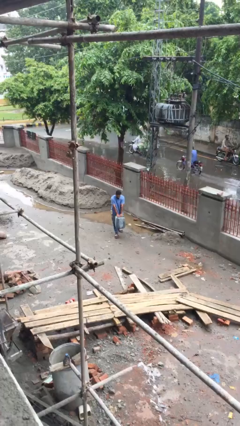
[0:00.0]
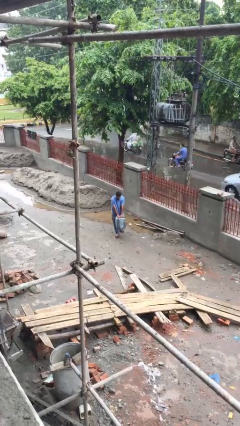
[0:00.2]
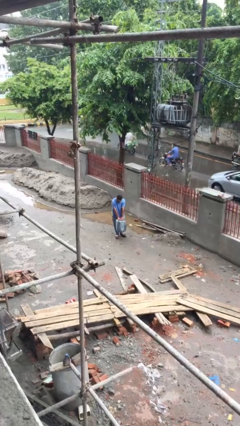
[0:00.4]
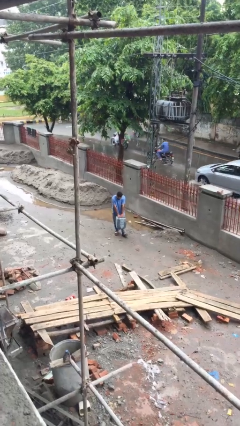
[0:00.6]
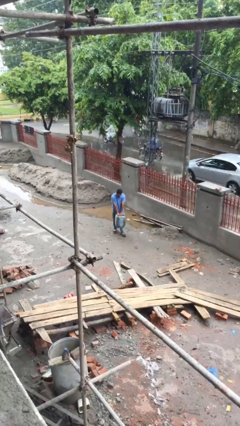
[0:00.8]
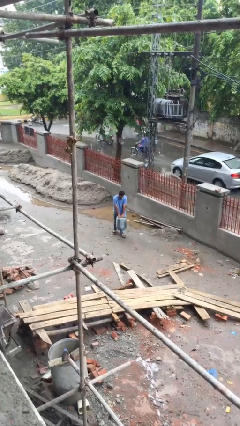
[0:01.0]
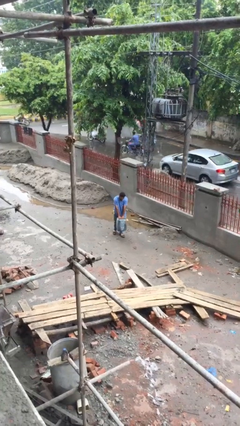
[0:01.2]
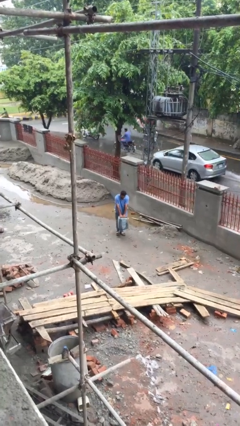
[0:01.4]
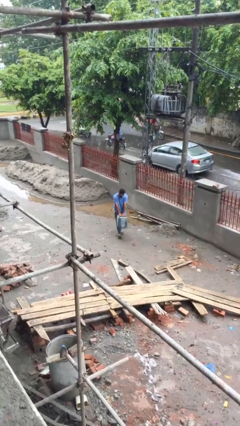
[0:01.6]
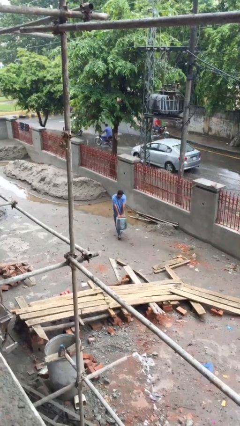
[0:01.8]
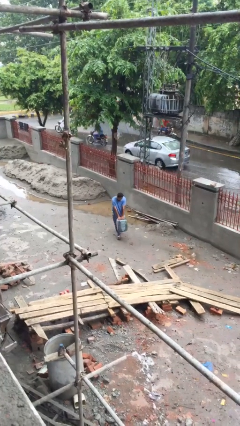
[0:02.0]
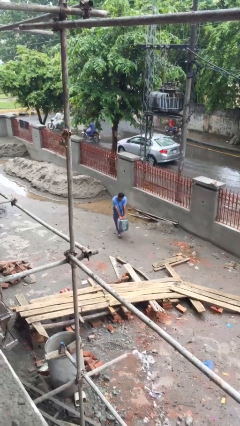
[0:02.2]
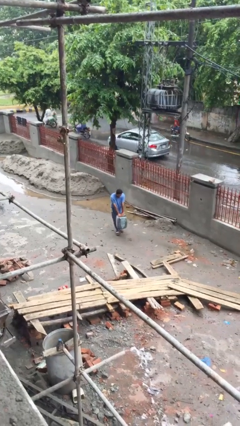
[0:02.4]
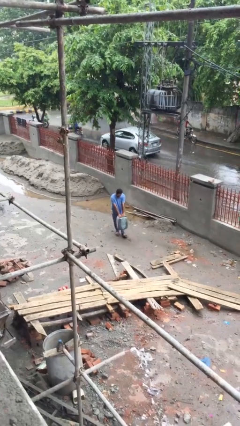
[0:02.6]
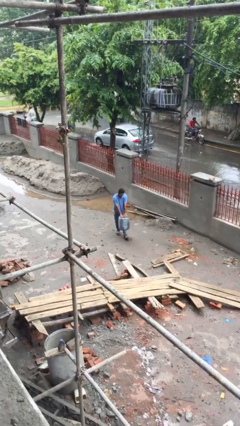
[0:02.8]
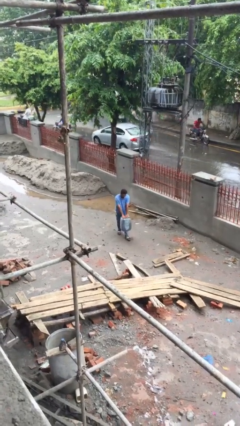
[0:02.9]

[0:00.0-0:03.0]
person carries heavy object

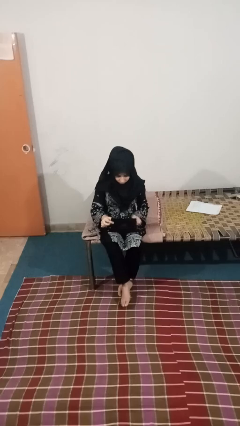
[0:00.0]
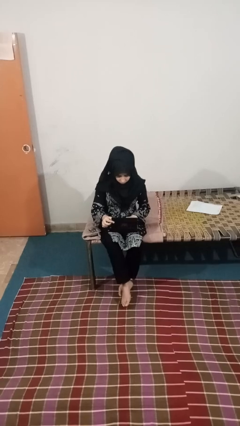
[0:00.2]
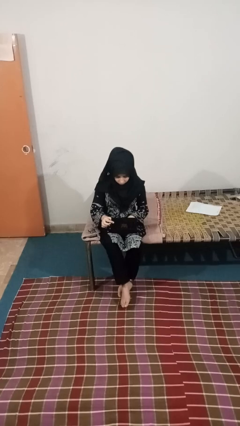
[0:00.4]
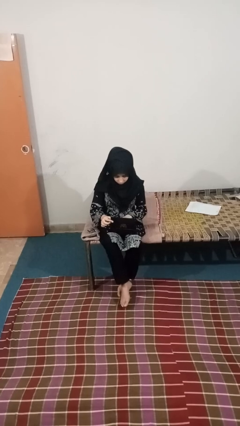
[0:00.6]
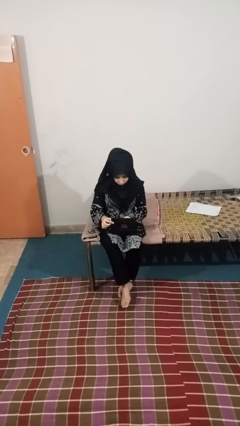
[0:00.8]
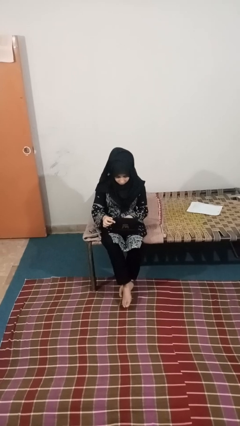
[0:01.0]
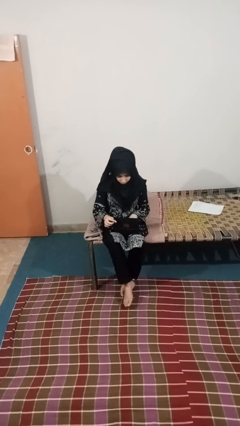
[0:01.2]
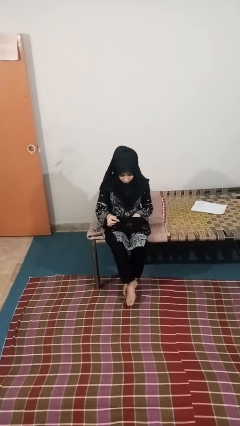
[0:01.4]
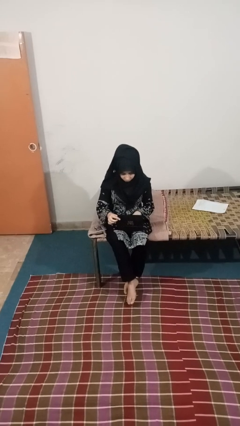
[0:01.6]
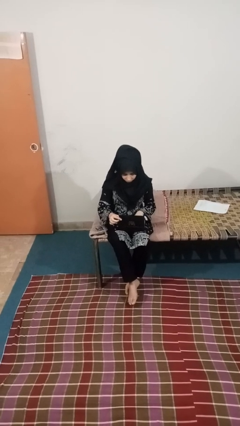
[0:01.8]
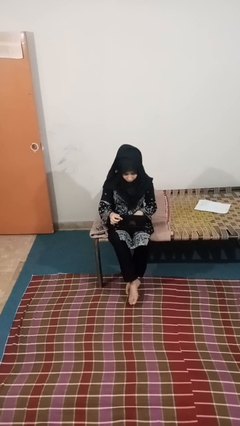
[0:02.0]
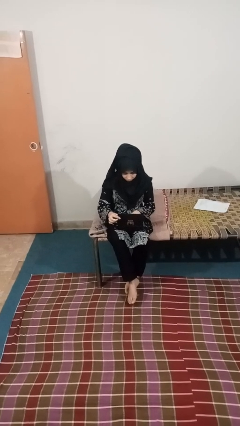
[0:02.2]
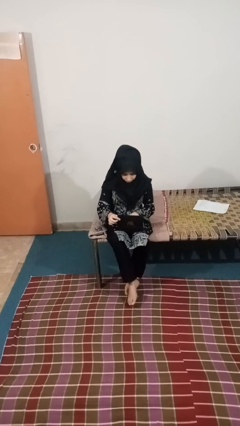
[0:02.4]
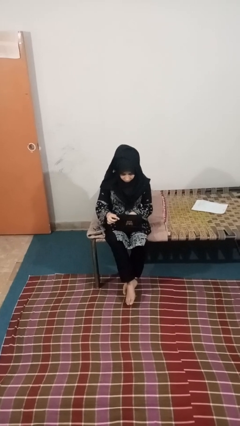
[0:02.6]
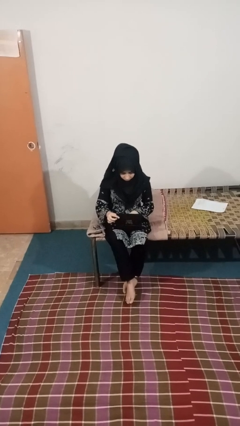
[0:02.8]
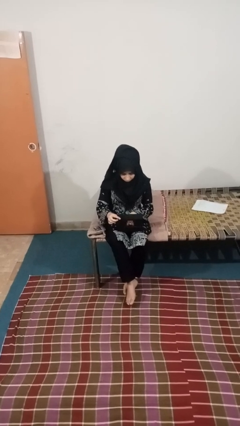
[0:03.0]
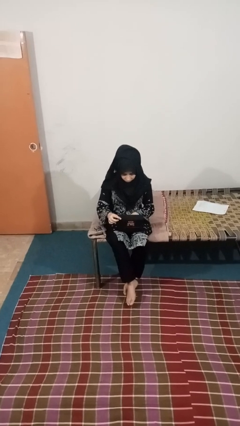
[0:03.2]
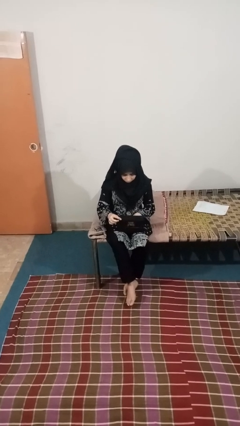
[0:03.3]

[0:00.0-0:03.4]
person searches jewelry box

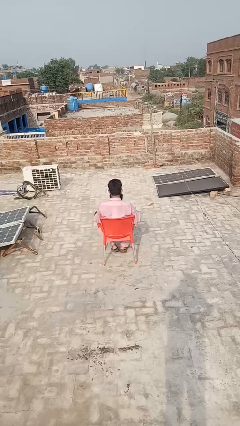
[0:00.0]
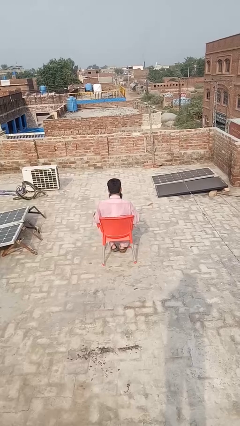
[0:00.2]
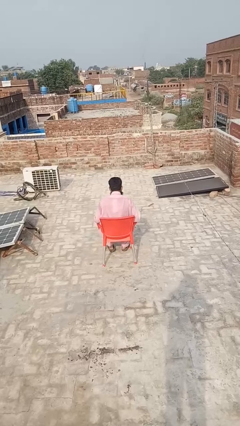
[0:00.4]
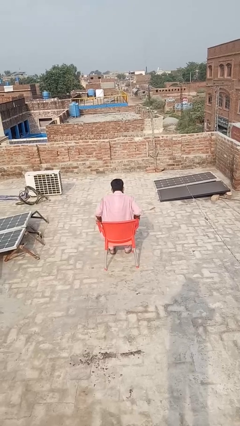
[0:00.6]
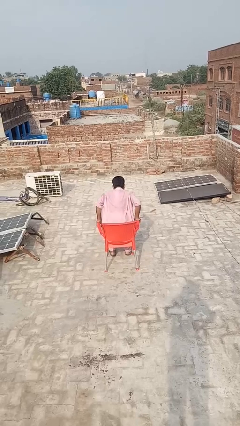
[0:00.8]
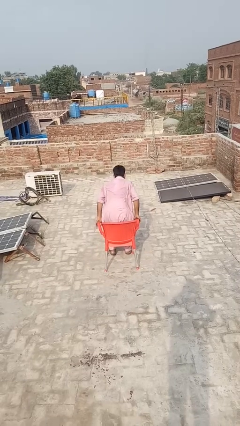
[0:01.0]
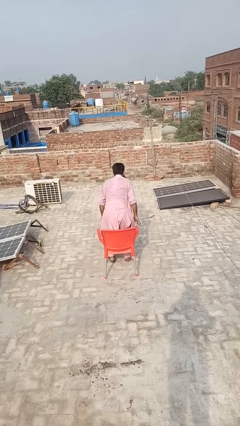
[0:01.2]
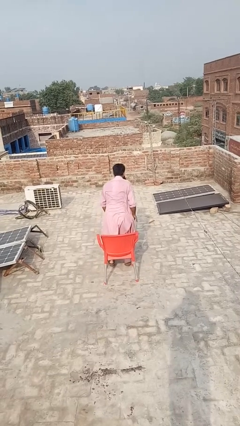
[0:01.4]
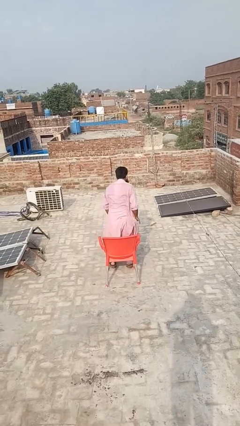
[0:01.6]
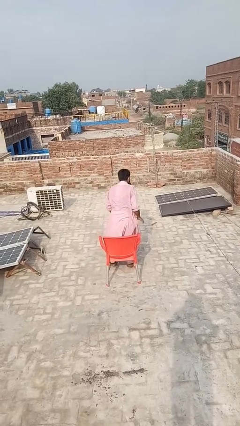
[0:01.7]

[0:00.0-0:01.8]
person falls from chair

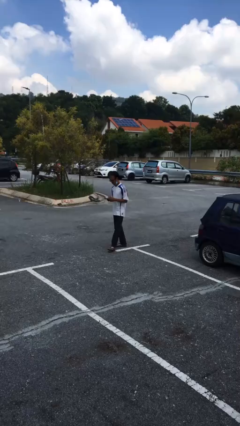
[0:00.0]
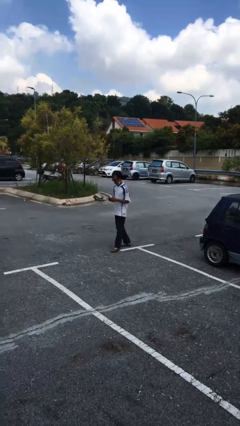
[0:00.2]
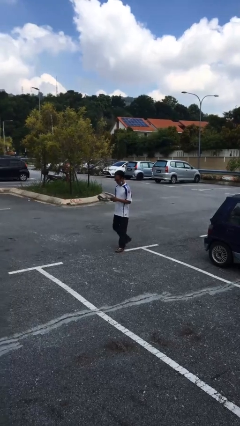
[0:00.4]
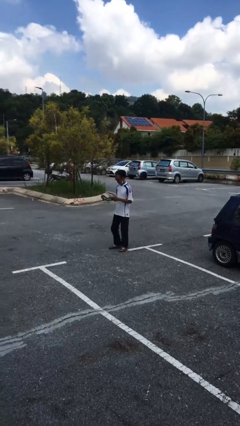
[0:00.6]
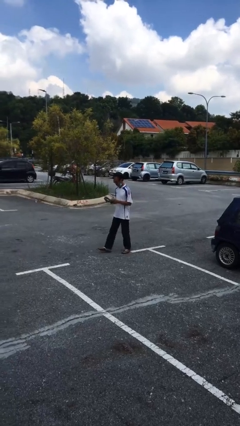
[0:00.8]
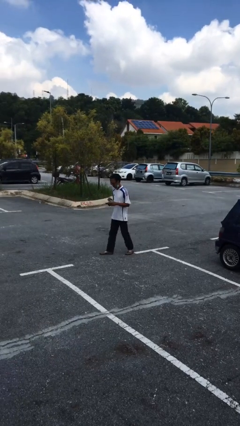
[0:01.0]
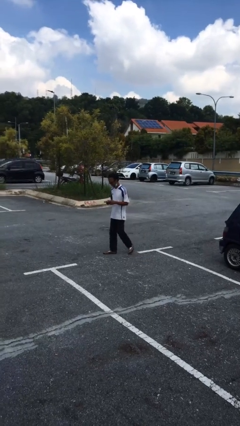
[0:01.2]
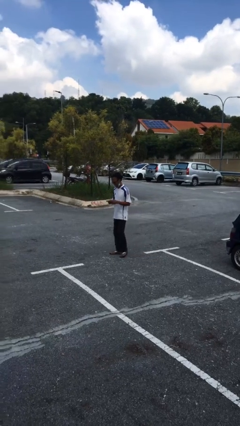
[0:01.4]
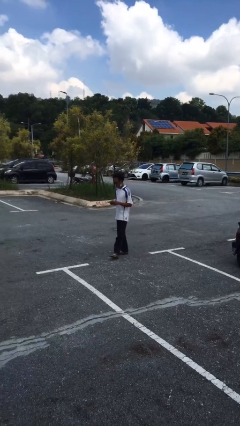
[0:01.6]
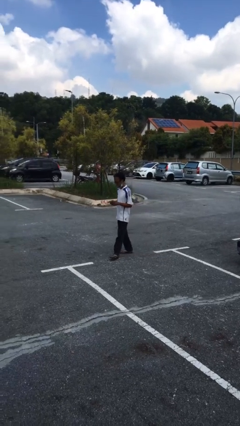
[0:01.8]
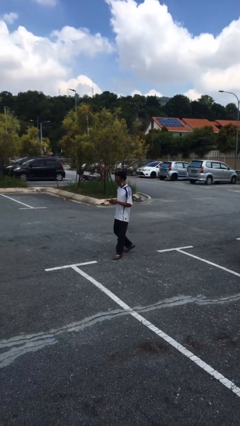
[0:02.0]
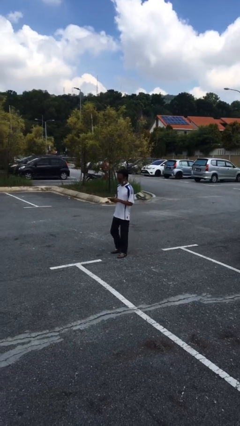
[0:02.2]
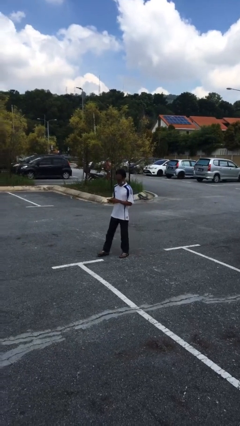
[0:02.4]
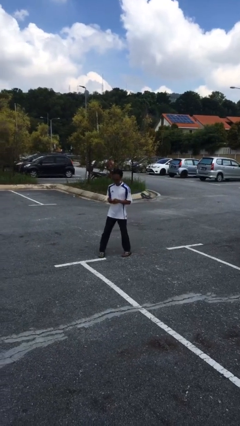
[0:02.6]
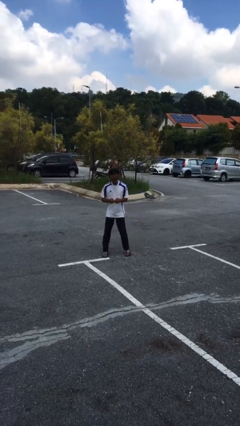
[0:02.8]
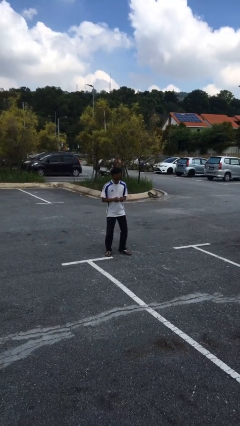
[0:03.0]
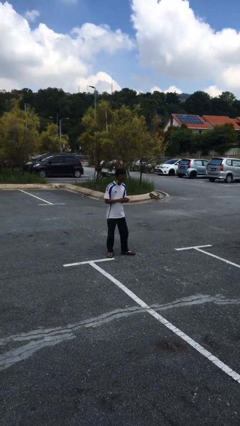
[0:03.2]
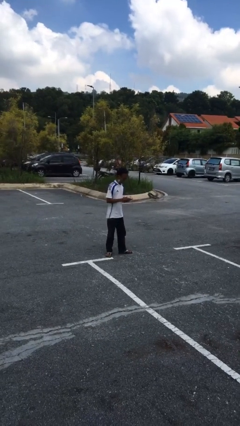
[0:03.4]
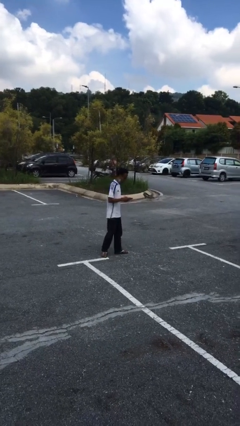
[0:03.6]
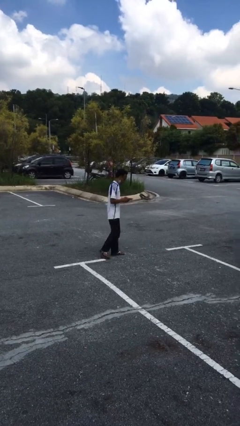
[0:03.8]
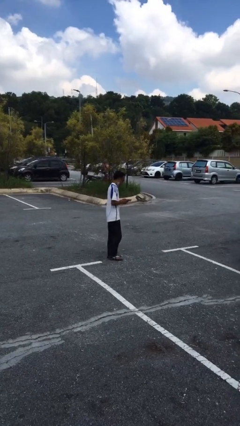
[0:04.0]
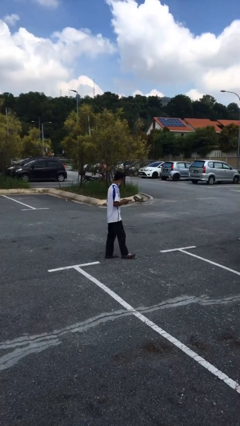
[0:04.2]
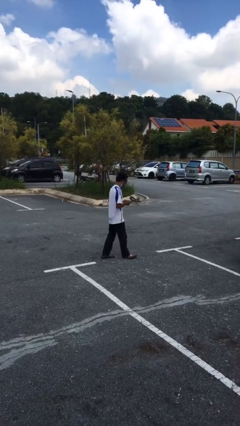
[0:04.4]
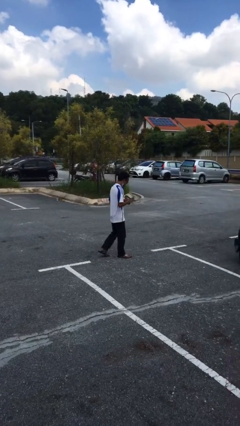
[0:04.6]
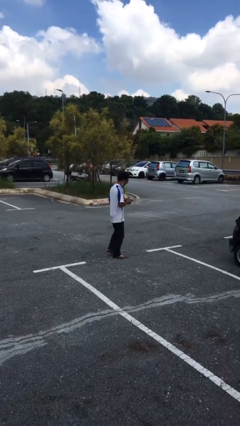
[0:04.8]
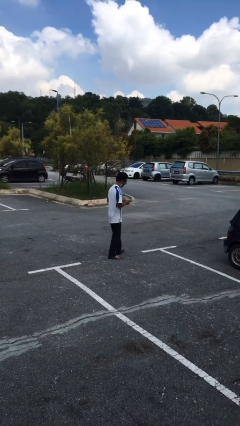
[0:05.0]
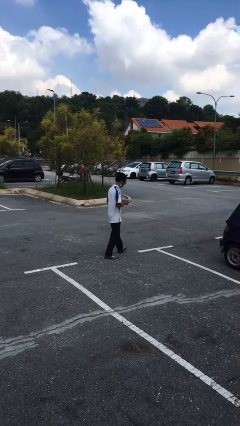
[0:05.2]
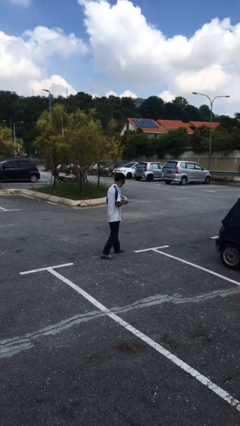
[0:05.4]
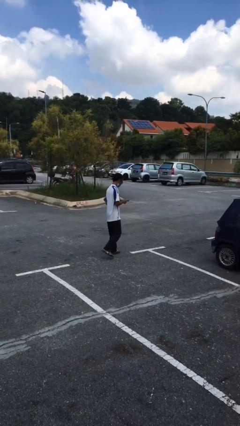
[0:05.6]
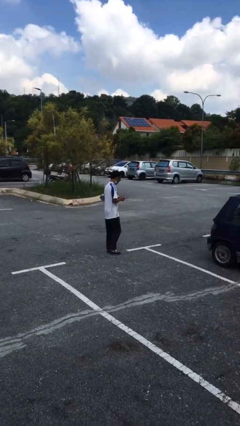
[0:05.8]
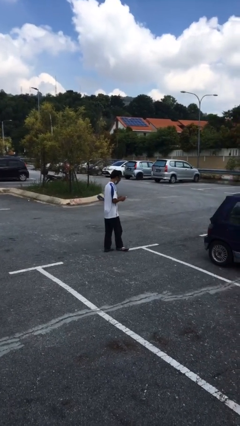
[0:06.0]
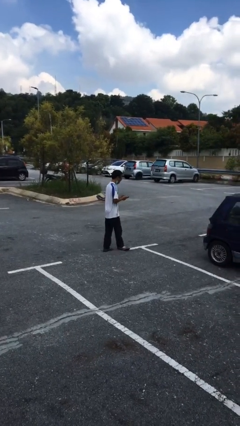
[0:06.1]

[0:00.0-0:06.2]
person texts on phone

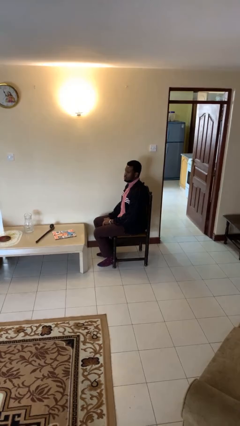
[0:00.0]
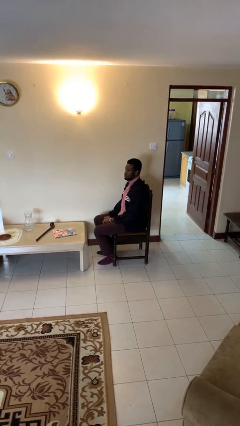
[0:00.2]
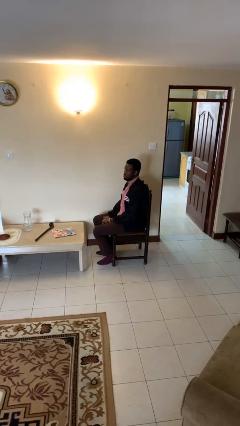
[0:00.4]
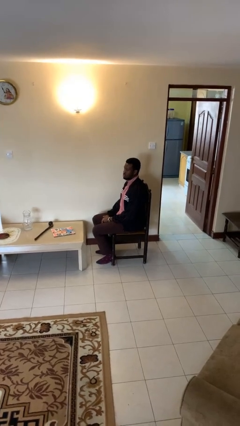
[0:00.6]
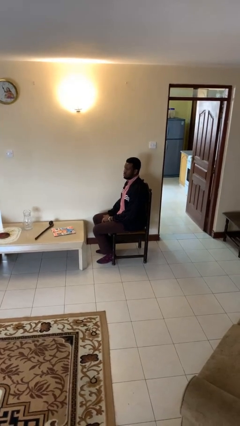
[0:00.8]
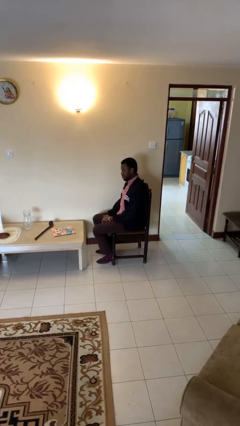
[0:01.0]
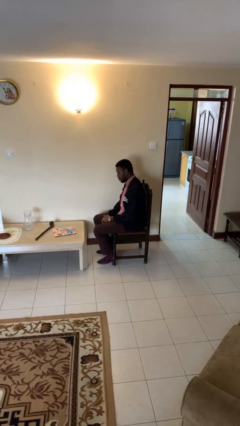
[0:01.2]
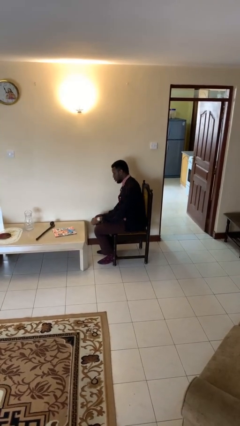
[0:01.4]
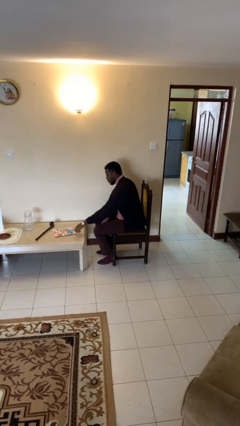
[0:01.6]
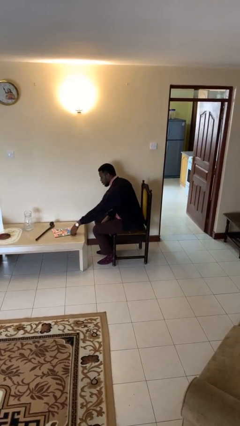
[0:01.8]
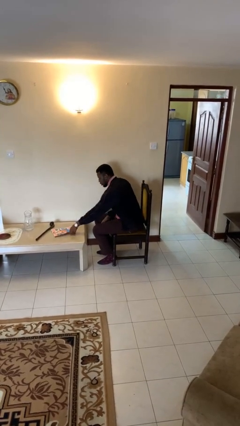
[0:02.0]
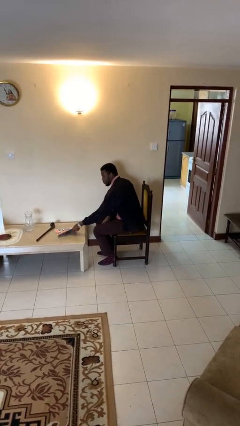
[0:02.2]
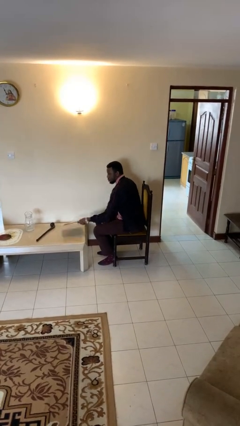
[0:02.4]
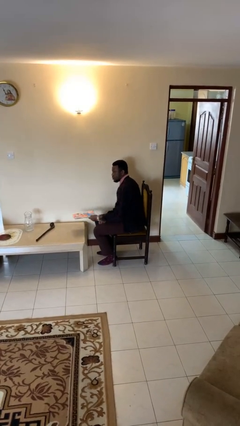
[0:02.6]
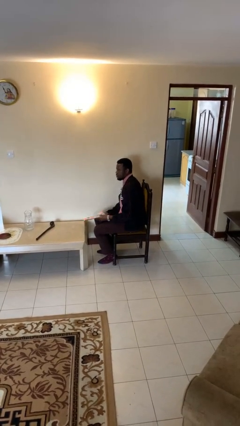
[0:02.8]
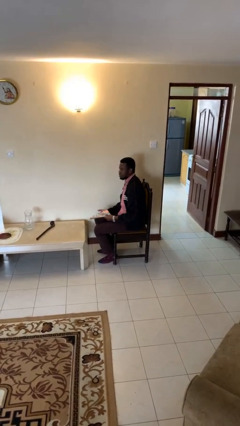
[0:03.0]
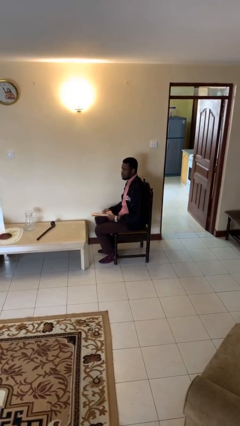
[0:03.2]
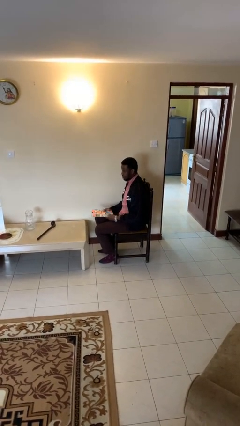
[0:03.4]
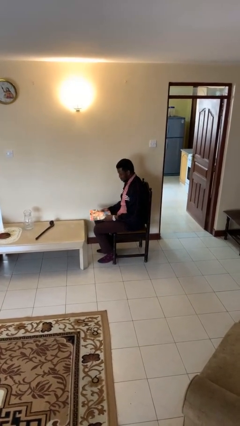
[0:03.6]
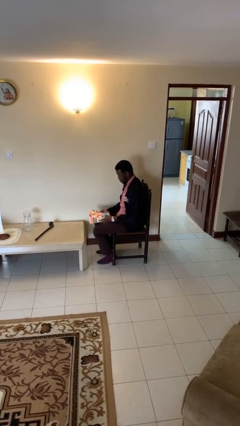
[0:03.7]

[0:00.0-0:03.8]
person picks up object from table
